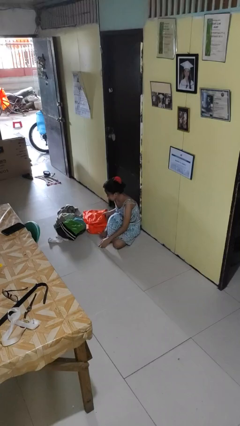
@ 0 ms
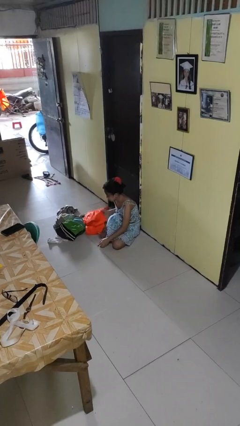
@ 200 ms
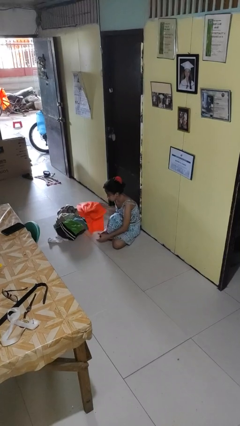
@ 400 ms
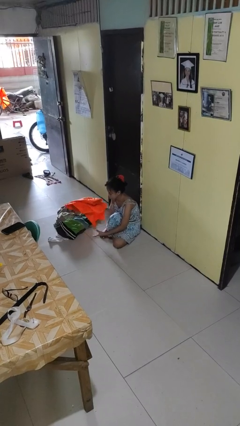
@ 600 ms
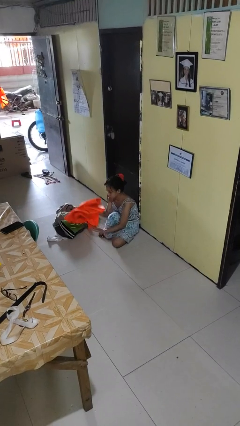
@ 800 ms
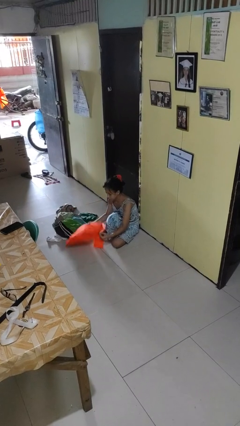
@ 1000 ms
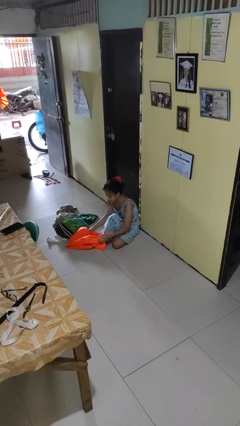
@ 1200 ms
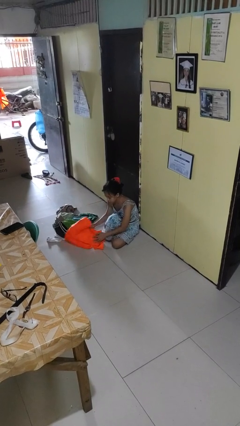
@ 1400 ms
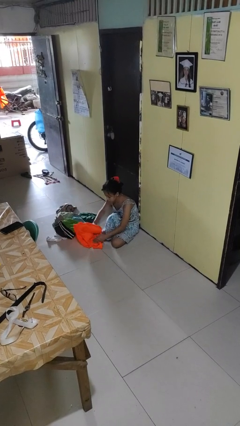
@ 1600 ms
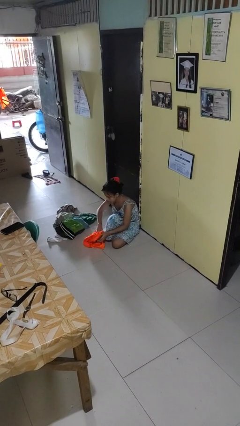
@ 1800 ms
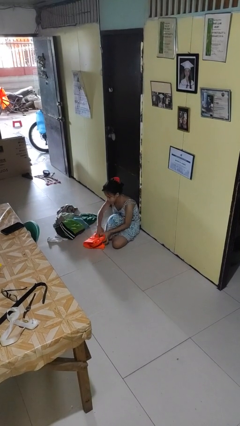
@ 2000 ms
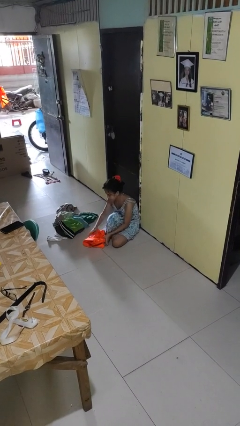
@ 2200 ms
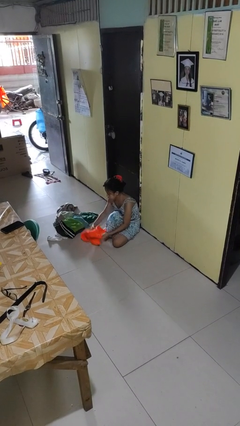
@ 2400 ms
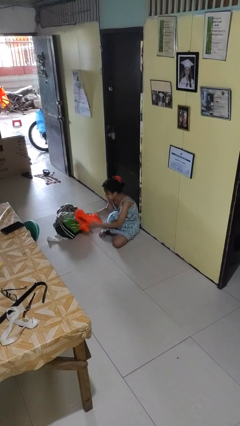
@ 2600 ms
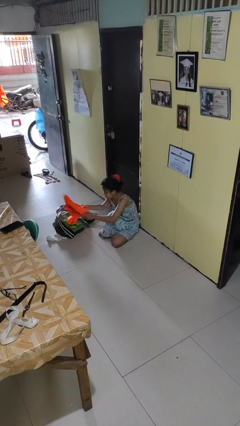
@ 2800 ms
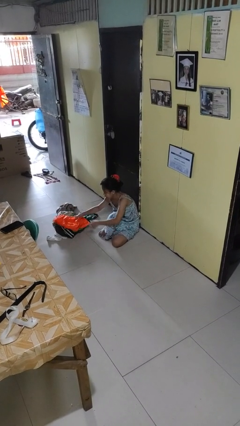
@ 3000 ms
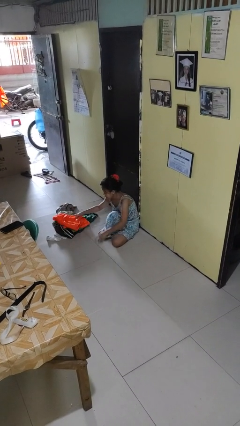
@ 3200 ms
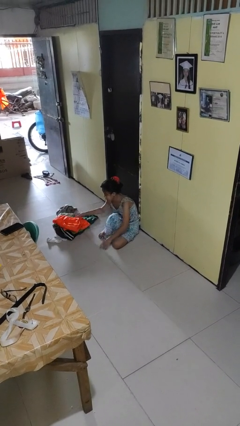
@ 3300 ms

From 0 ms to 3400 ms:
person folds pants

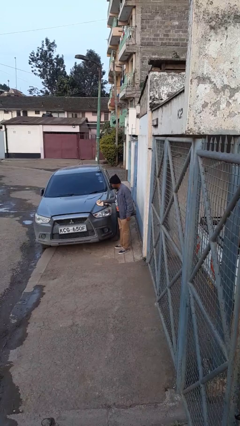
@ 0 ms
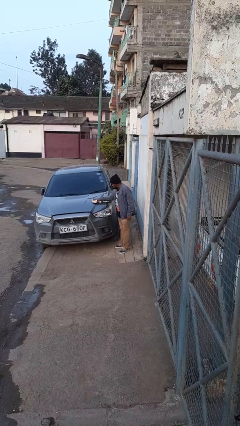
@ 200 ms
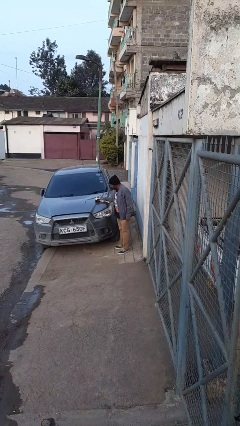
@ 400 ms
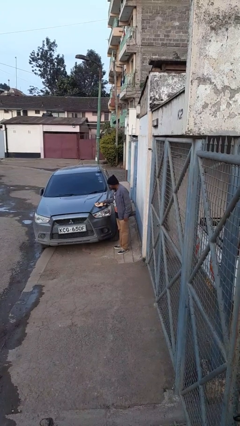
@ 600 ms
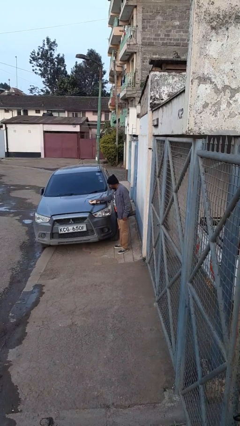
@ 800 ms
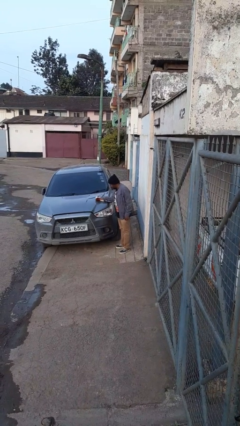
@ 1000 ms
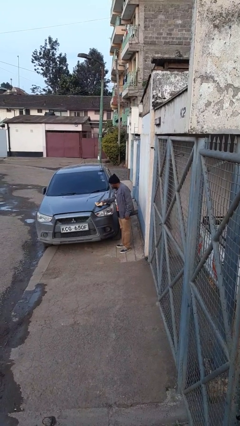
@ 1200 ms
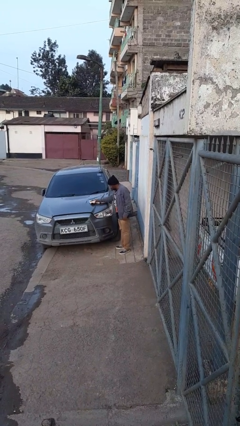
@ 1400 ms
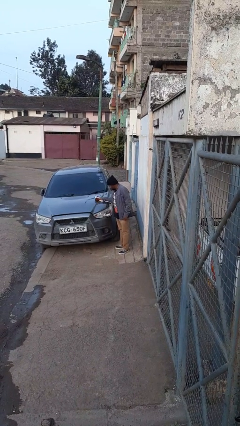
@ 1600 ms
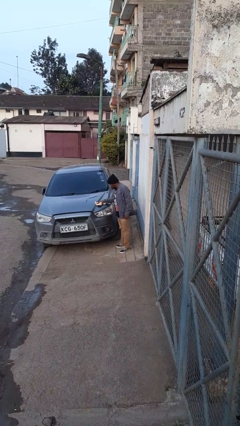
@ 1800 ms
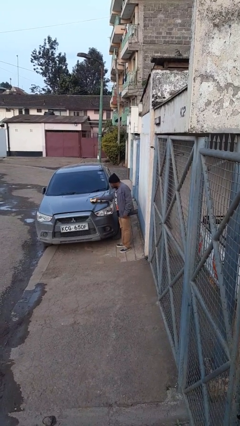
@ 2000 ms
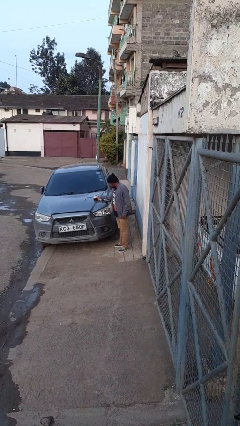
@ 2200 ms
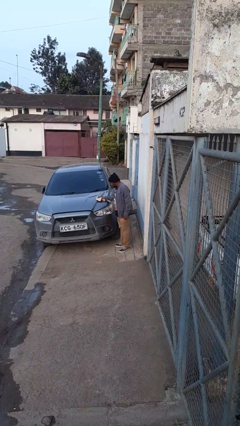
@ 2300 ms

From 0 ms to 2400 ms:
person polishes car with rag

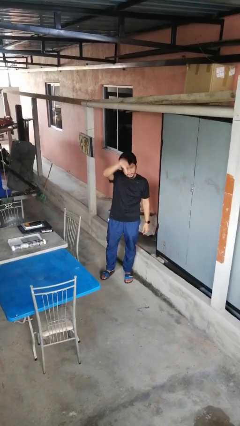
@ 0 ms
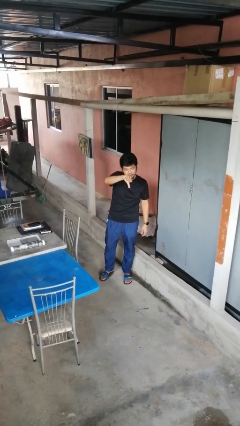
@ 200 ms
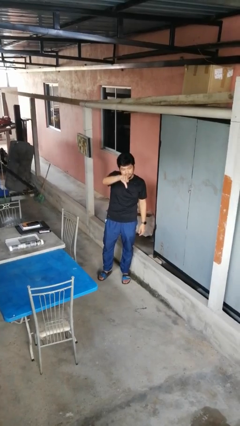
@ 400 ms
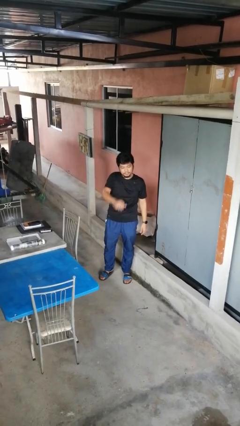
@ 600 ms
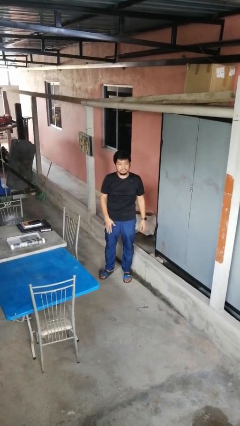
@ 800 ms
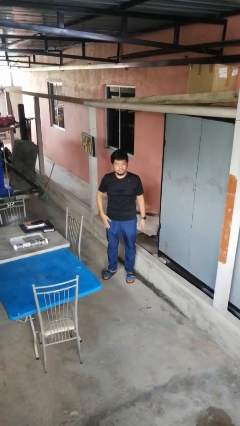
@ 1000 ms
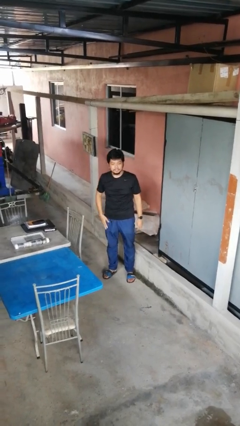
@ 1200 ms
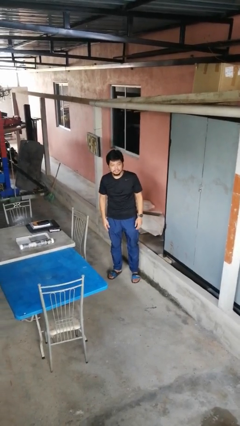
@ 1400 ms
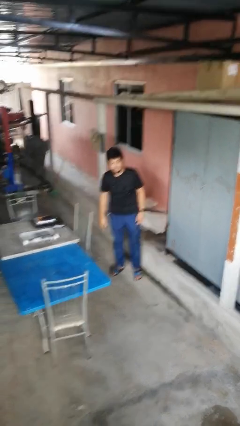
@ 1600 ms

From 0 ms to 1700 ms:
person closes gate

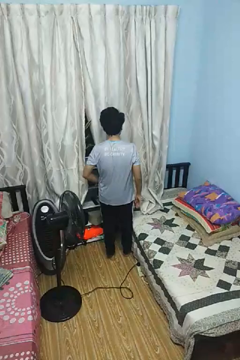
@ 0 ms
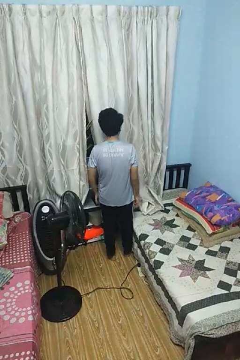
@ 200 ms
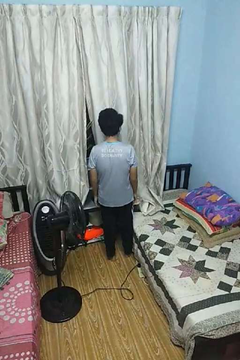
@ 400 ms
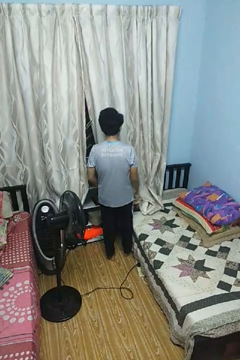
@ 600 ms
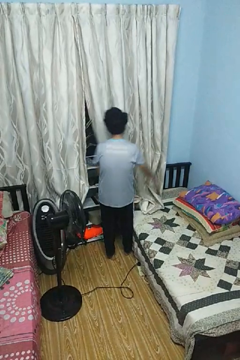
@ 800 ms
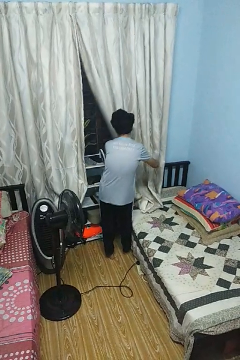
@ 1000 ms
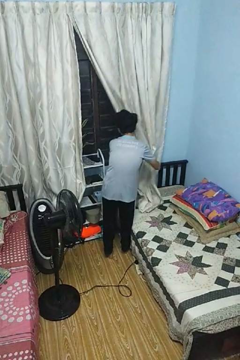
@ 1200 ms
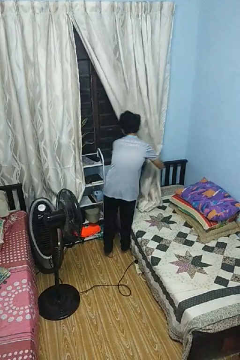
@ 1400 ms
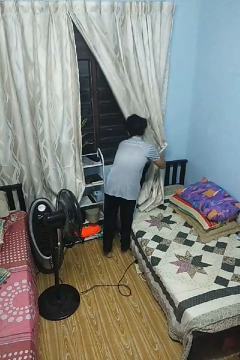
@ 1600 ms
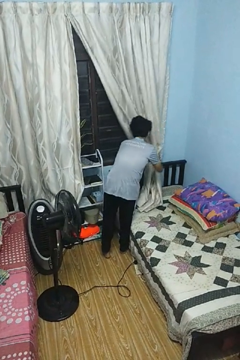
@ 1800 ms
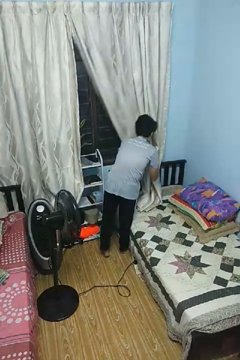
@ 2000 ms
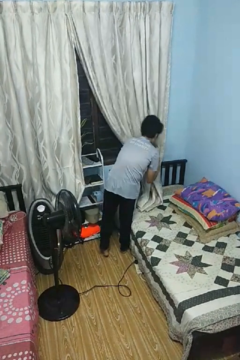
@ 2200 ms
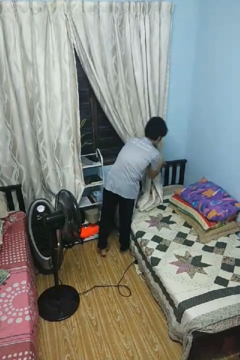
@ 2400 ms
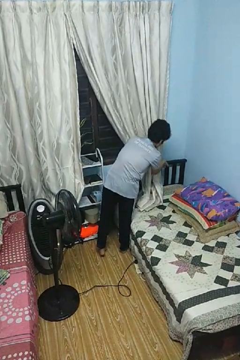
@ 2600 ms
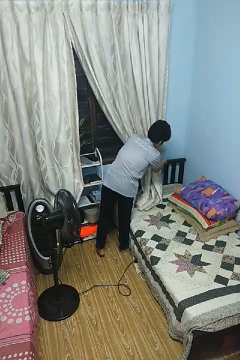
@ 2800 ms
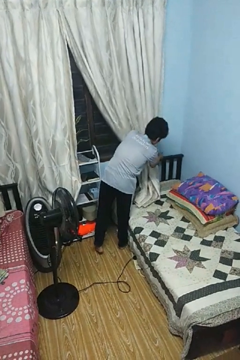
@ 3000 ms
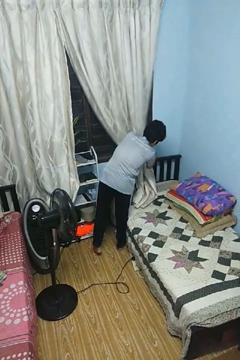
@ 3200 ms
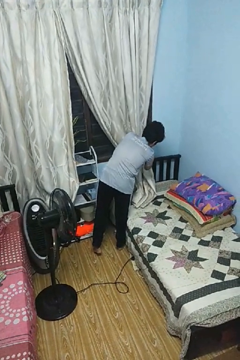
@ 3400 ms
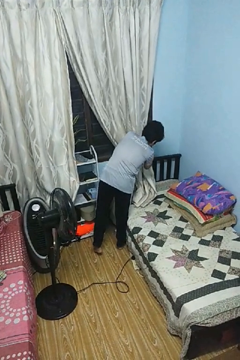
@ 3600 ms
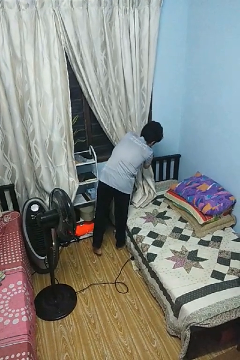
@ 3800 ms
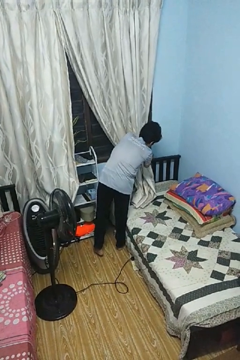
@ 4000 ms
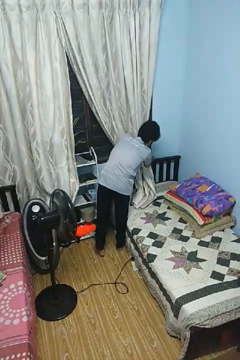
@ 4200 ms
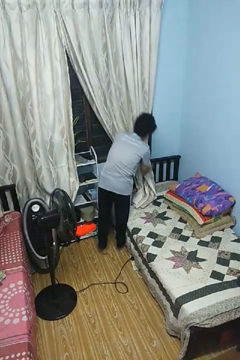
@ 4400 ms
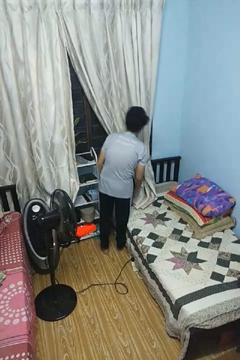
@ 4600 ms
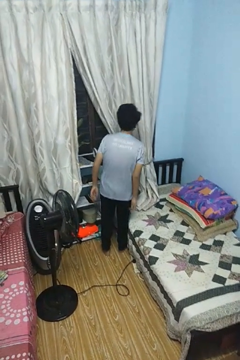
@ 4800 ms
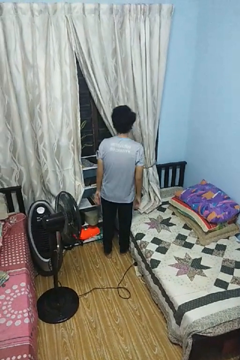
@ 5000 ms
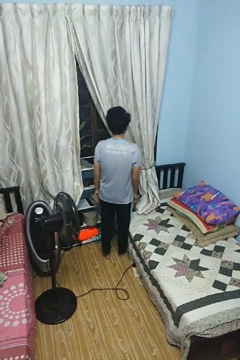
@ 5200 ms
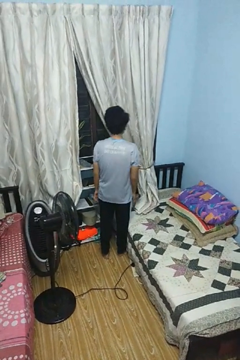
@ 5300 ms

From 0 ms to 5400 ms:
person opens curtains

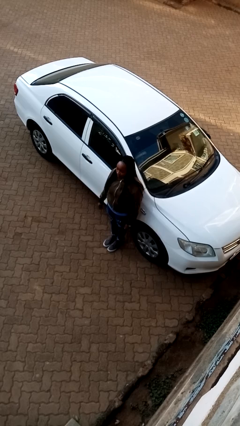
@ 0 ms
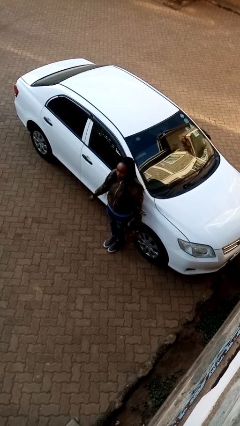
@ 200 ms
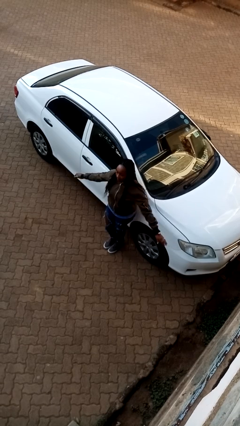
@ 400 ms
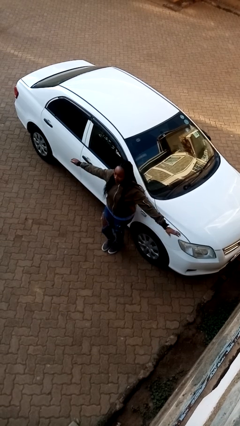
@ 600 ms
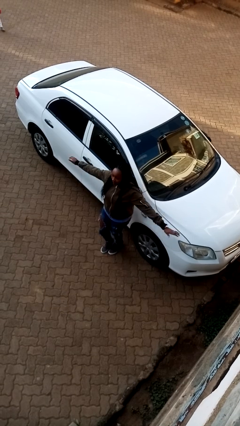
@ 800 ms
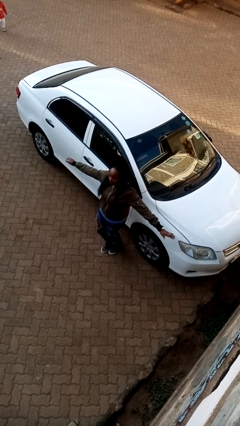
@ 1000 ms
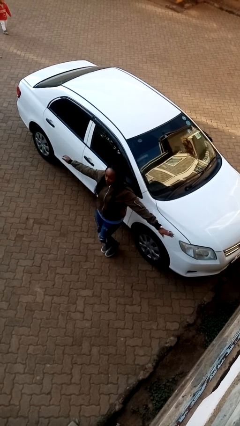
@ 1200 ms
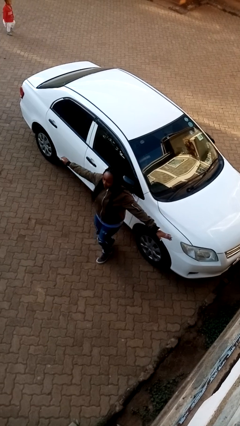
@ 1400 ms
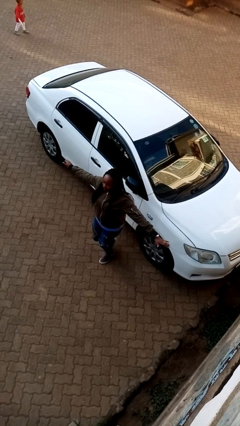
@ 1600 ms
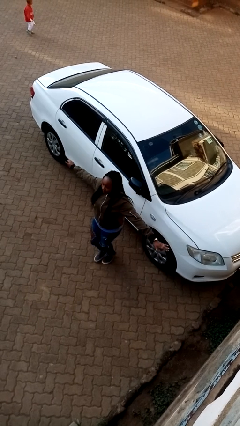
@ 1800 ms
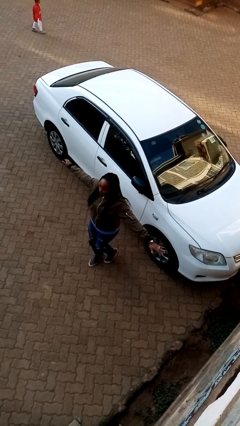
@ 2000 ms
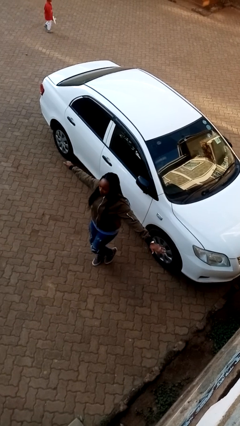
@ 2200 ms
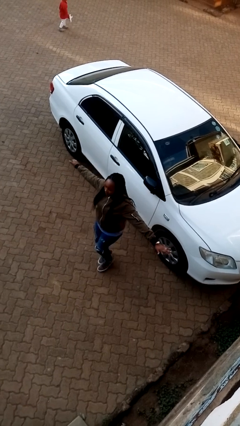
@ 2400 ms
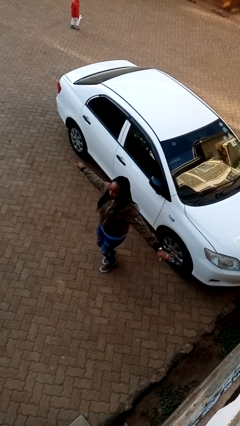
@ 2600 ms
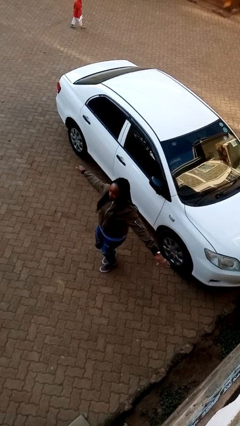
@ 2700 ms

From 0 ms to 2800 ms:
person walks tiptoe

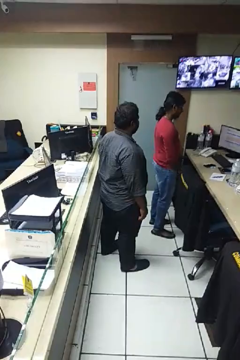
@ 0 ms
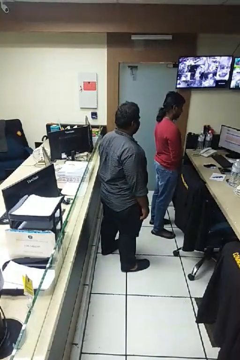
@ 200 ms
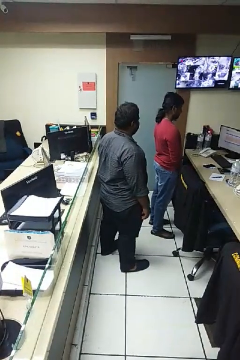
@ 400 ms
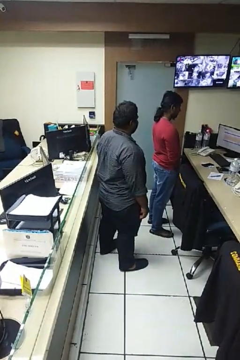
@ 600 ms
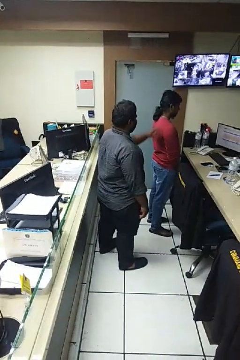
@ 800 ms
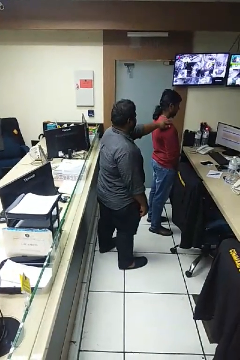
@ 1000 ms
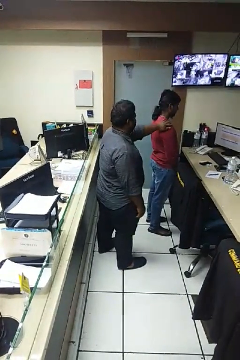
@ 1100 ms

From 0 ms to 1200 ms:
person grabs person by shoulder

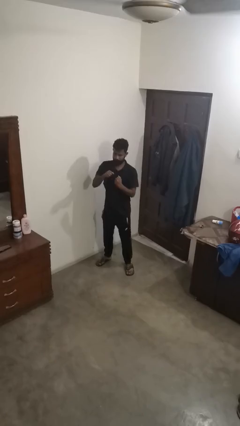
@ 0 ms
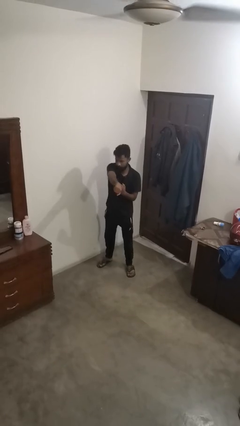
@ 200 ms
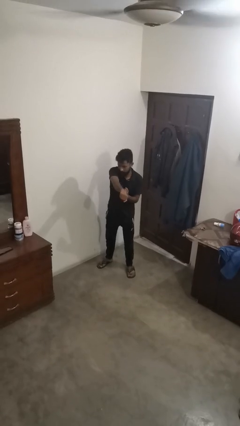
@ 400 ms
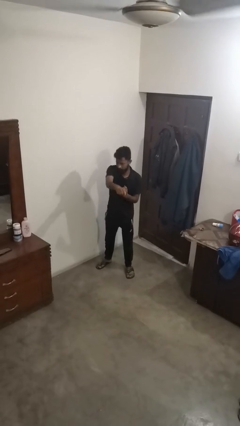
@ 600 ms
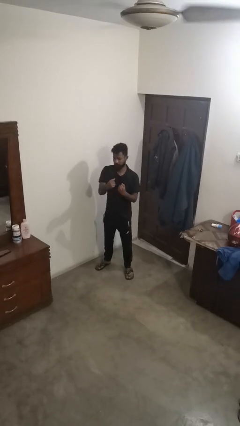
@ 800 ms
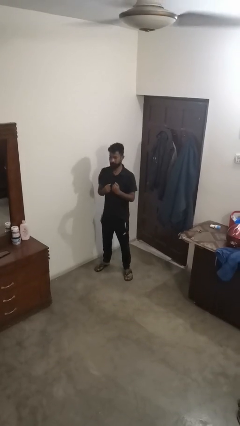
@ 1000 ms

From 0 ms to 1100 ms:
person punches

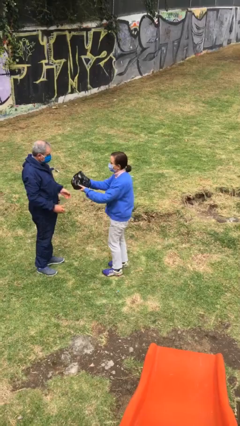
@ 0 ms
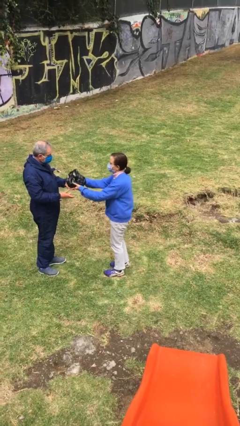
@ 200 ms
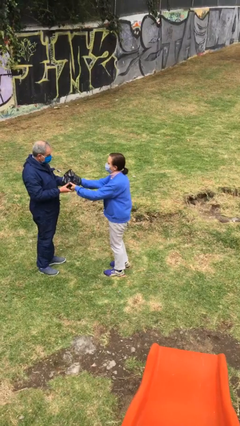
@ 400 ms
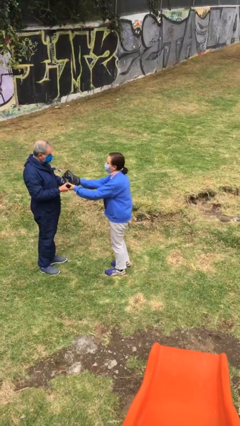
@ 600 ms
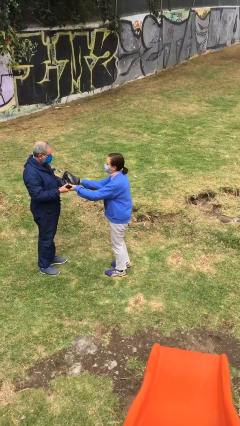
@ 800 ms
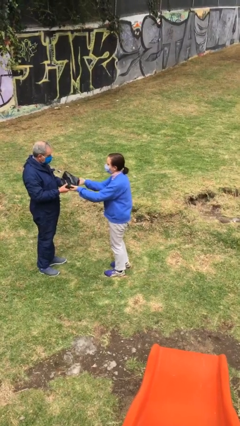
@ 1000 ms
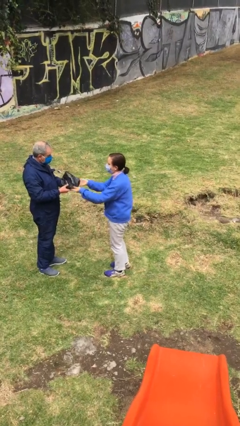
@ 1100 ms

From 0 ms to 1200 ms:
person transfers object to person
